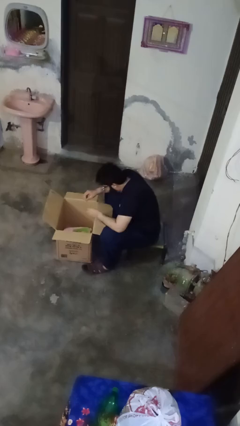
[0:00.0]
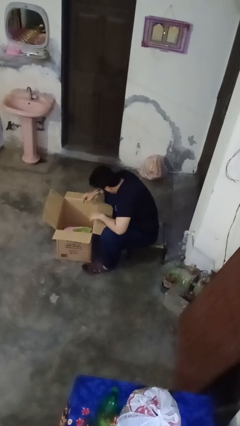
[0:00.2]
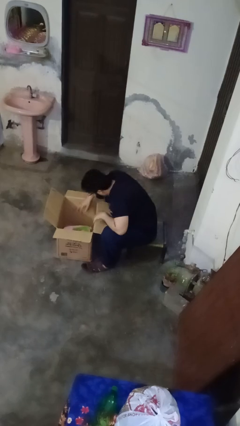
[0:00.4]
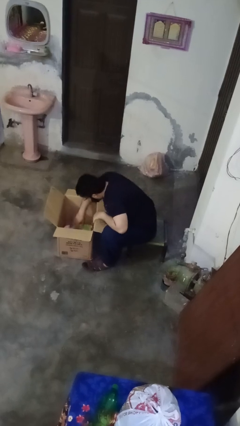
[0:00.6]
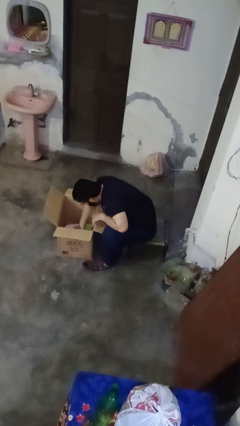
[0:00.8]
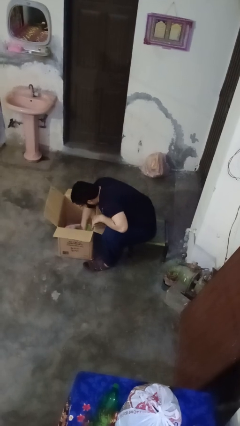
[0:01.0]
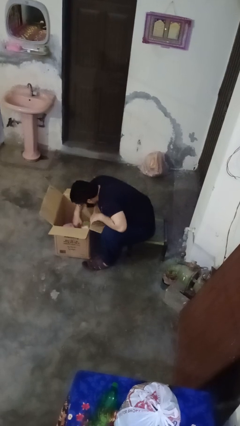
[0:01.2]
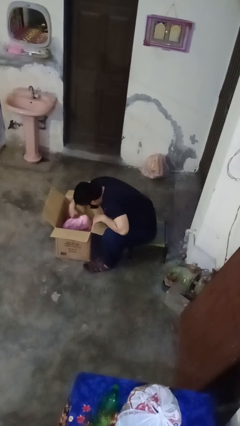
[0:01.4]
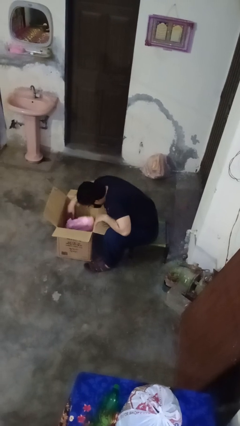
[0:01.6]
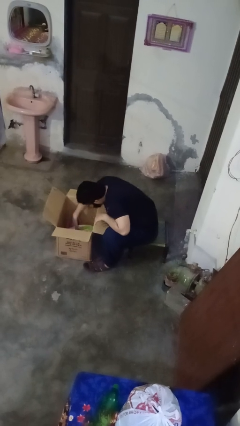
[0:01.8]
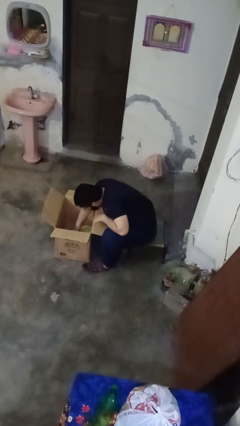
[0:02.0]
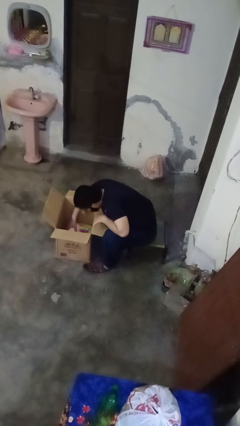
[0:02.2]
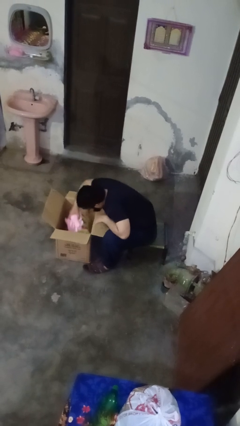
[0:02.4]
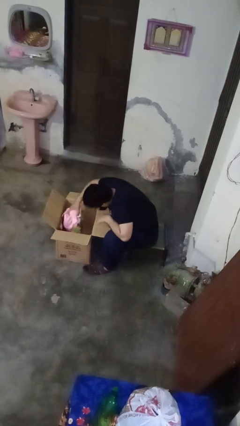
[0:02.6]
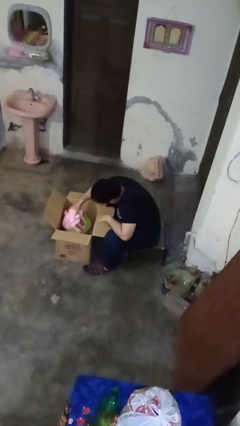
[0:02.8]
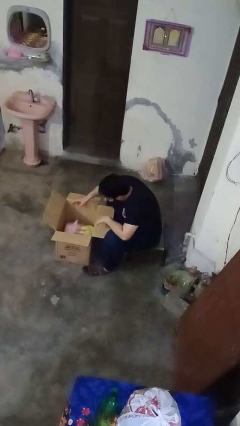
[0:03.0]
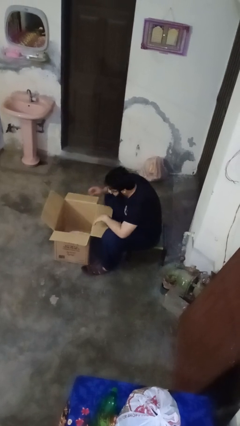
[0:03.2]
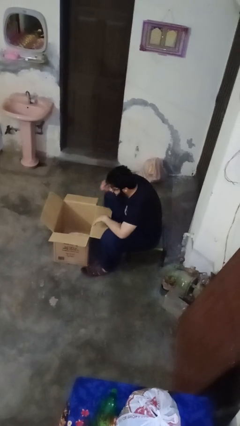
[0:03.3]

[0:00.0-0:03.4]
person searches in box

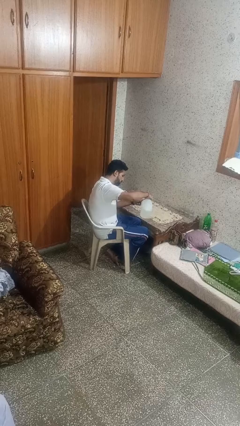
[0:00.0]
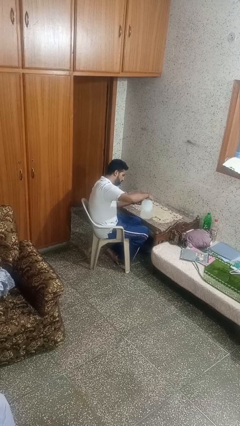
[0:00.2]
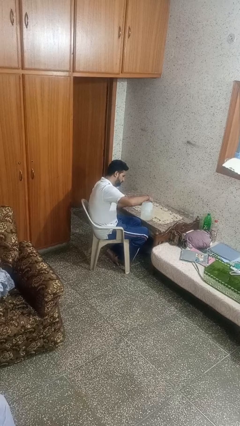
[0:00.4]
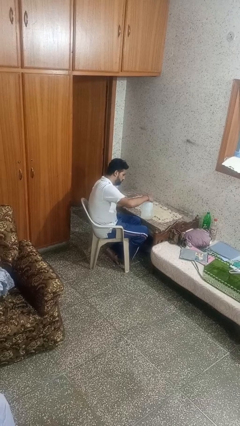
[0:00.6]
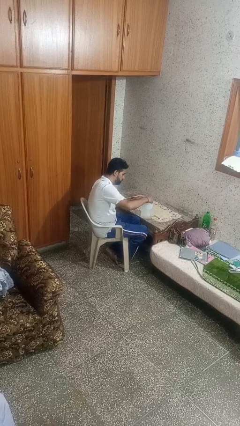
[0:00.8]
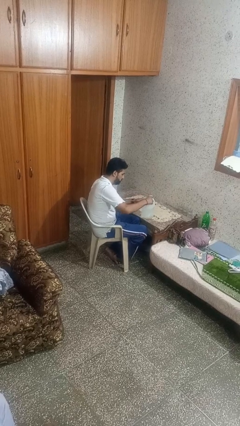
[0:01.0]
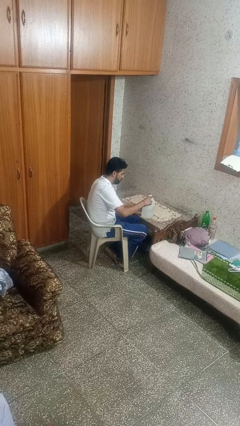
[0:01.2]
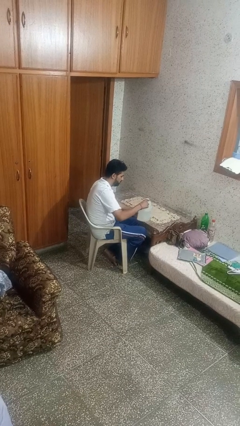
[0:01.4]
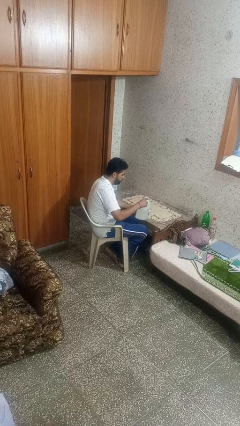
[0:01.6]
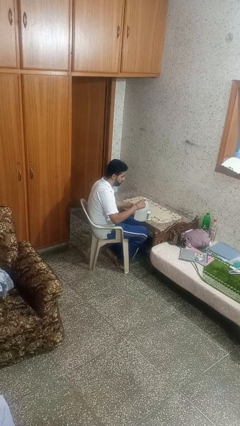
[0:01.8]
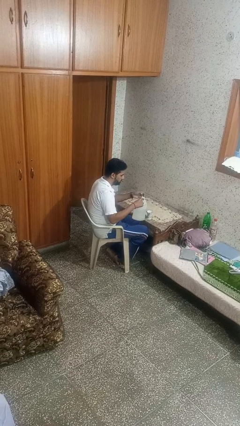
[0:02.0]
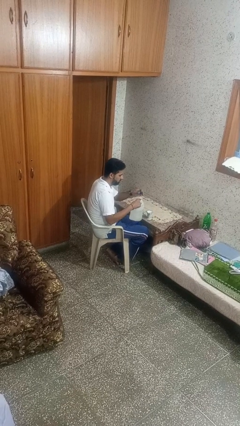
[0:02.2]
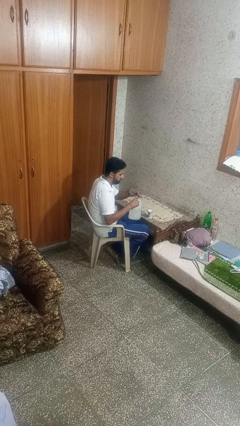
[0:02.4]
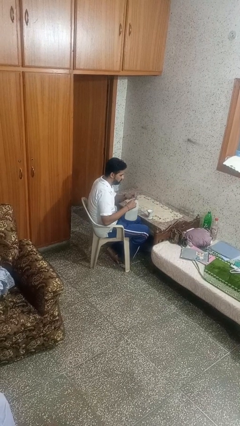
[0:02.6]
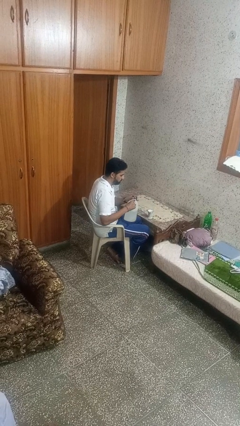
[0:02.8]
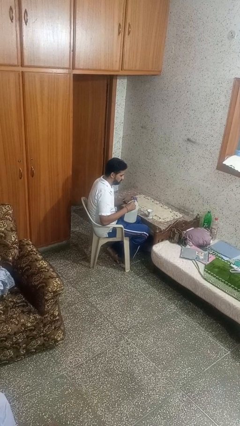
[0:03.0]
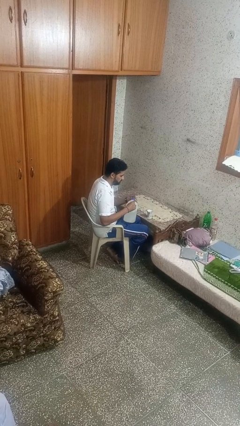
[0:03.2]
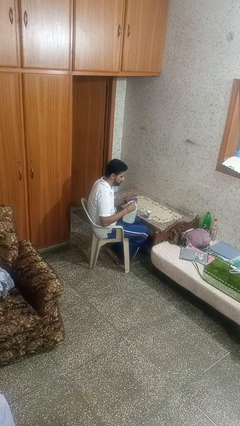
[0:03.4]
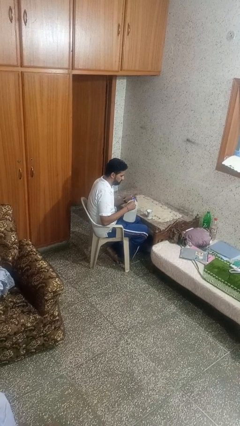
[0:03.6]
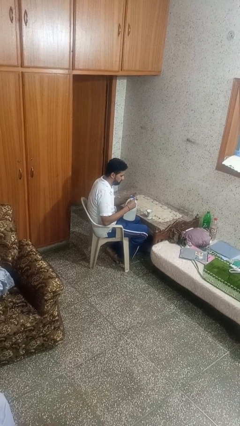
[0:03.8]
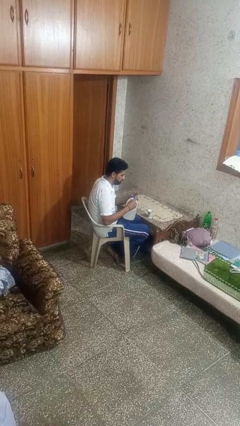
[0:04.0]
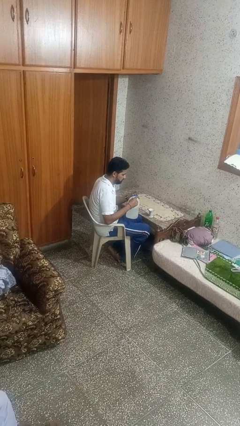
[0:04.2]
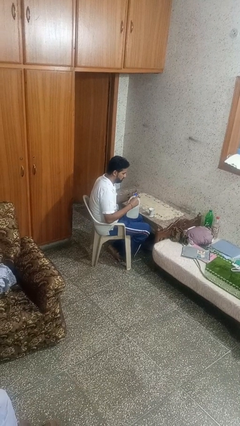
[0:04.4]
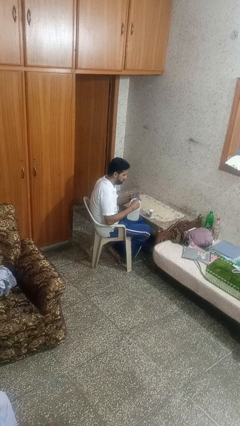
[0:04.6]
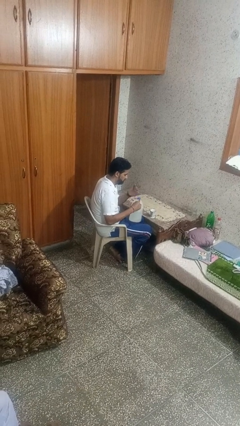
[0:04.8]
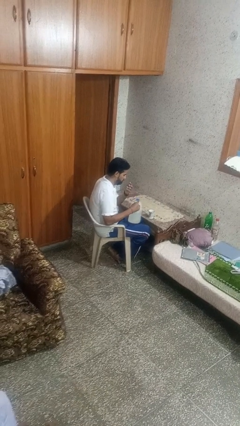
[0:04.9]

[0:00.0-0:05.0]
person screws lid to bottle

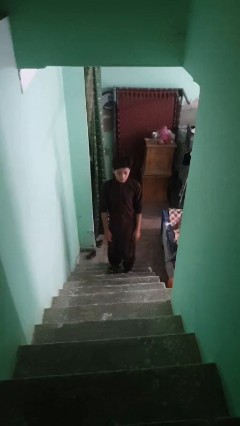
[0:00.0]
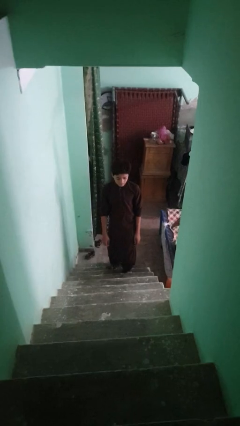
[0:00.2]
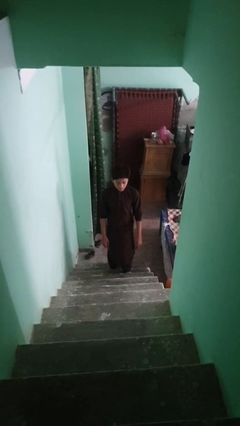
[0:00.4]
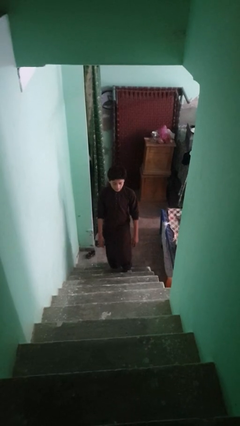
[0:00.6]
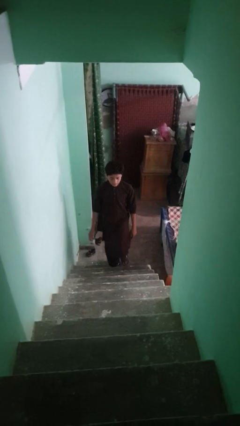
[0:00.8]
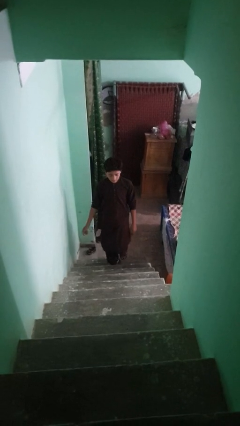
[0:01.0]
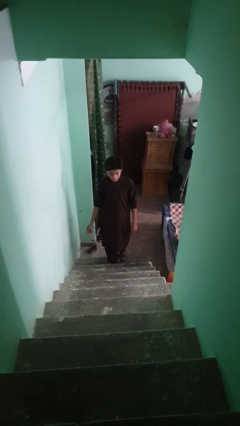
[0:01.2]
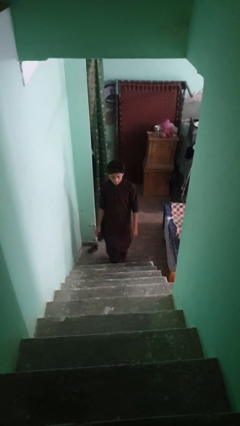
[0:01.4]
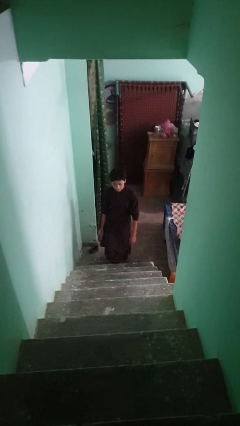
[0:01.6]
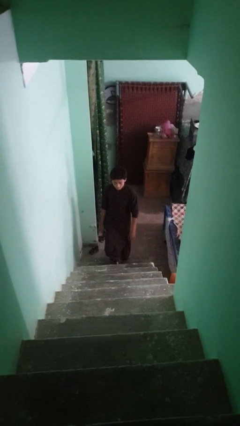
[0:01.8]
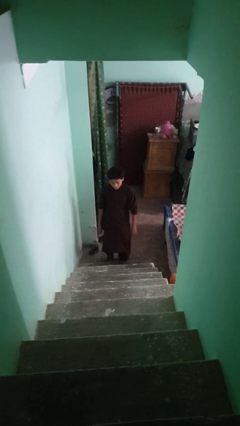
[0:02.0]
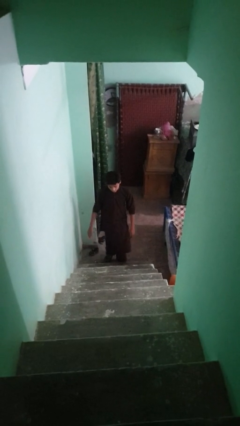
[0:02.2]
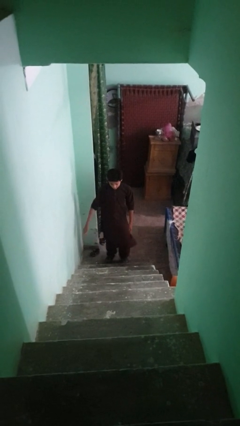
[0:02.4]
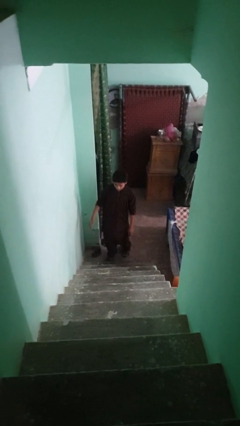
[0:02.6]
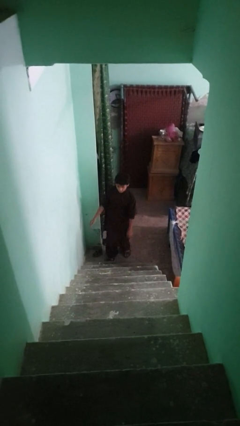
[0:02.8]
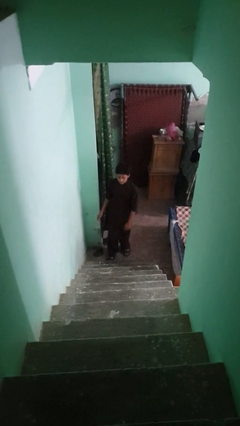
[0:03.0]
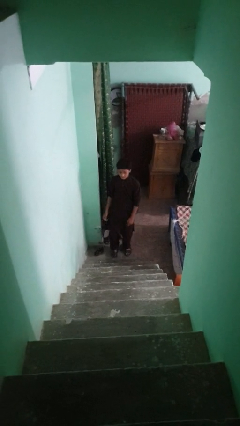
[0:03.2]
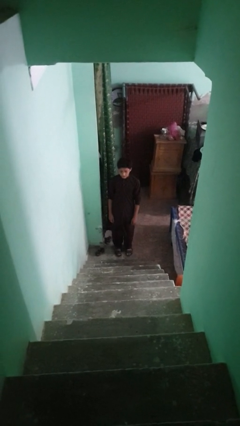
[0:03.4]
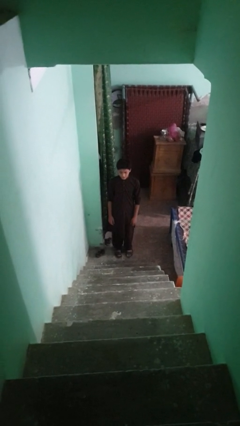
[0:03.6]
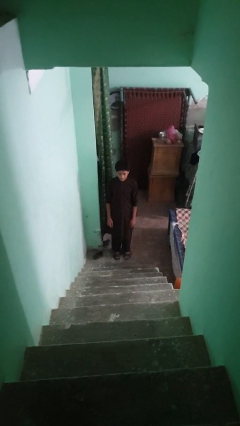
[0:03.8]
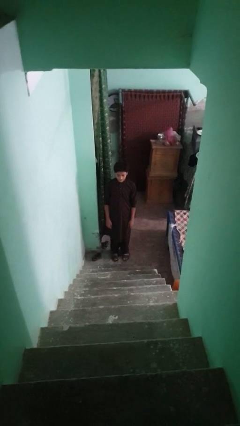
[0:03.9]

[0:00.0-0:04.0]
person climbs down stairs

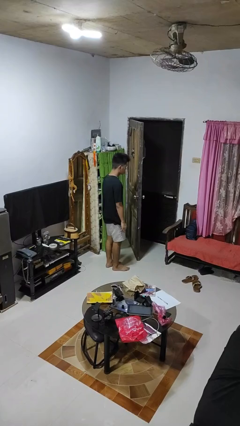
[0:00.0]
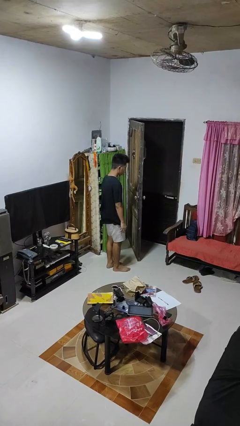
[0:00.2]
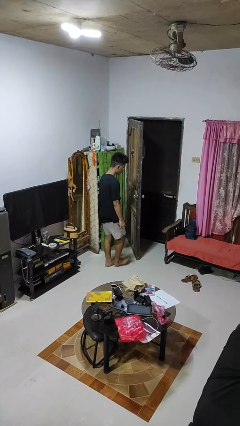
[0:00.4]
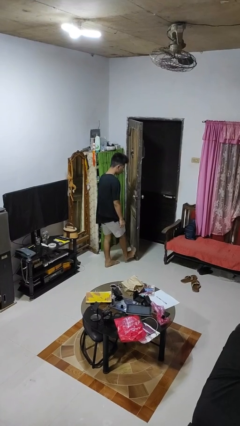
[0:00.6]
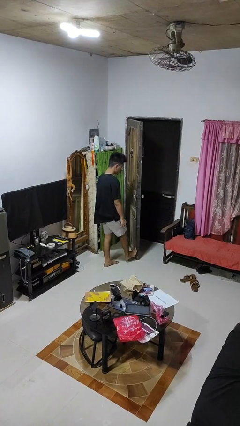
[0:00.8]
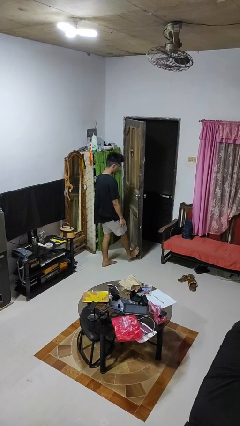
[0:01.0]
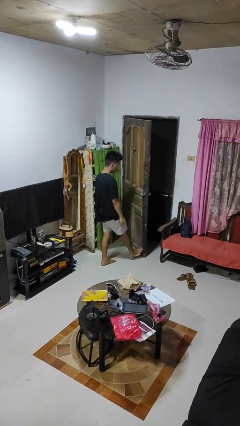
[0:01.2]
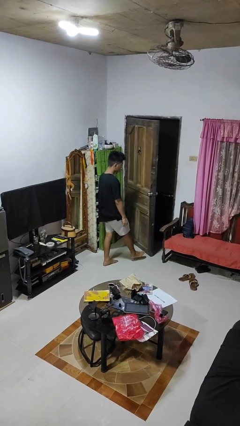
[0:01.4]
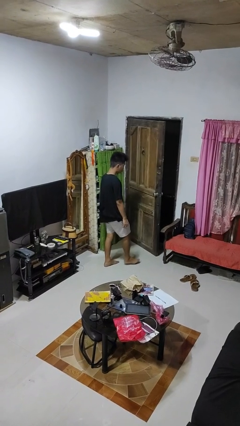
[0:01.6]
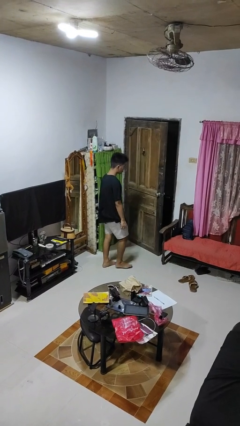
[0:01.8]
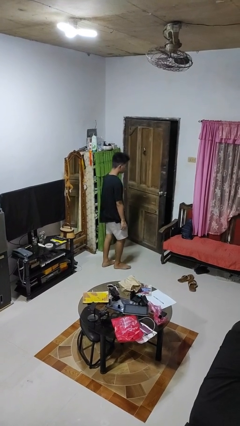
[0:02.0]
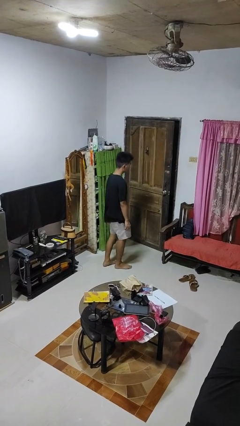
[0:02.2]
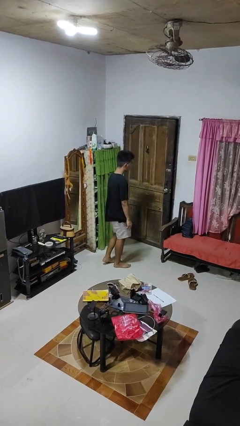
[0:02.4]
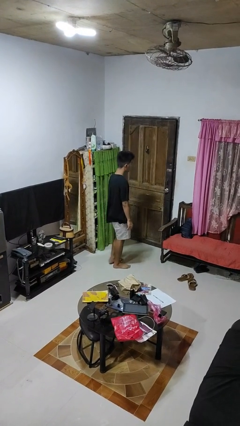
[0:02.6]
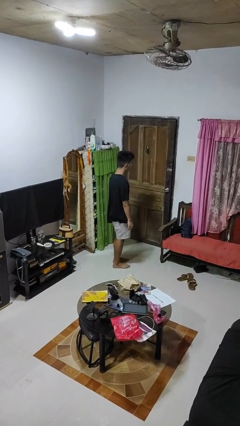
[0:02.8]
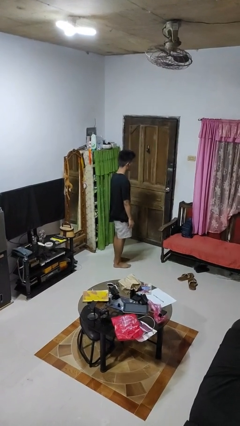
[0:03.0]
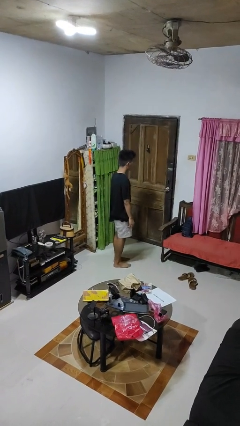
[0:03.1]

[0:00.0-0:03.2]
person closes door with foot

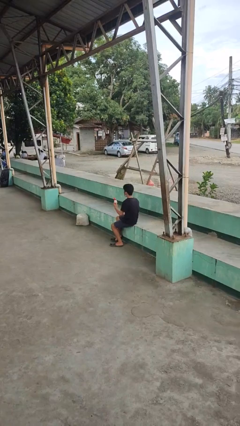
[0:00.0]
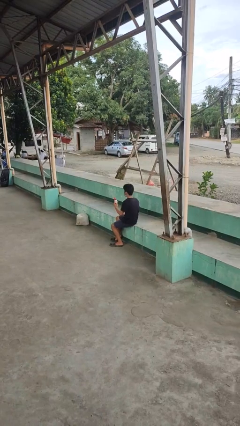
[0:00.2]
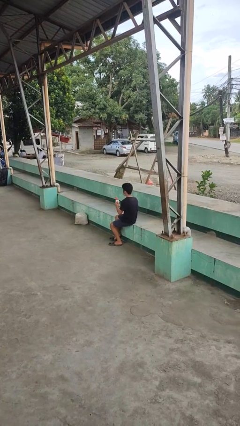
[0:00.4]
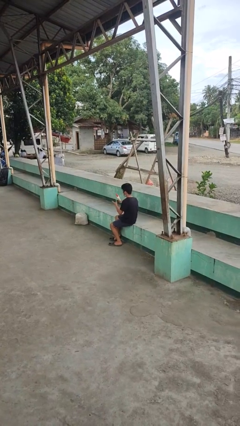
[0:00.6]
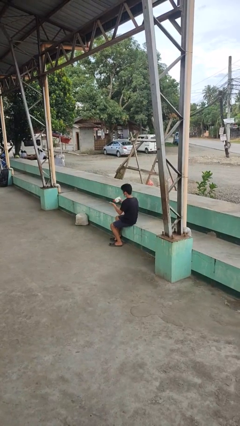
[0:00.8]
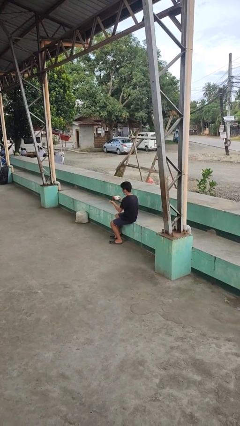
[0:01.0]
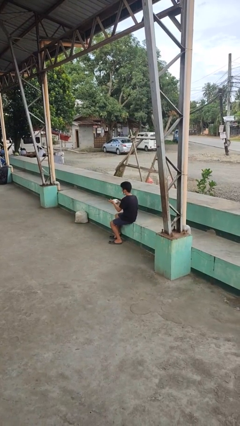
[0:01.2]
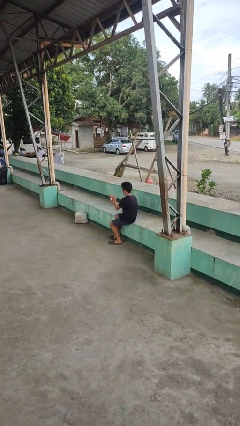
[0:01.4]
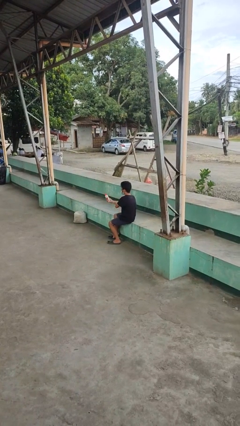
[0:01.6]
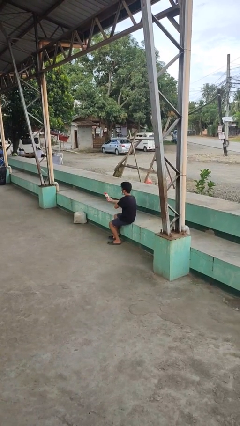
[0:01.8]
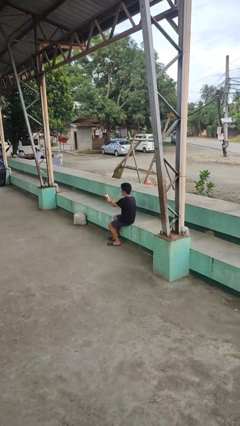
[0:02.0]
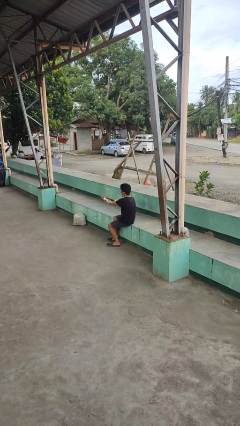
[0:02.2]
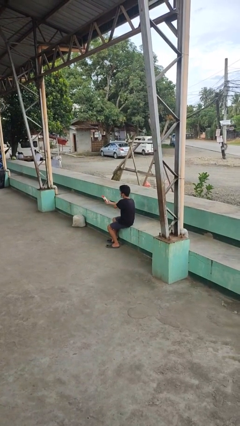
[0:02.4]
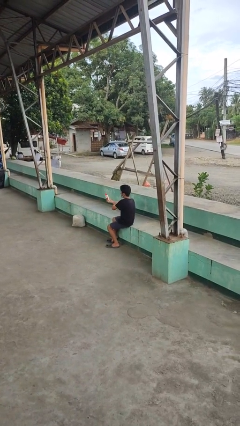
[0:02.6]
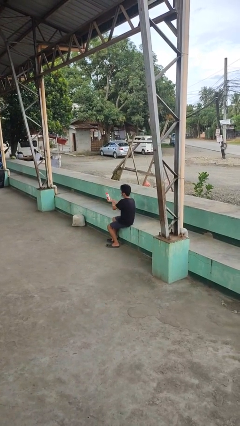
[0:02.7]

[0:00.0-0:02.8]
person applies sunscreen
